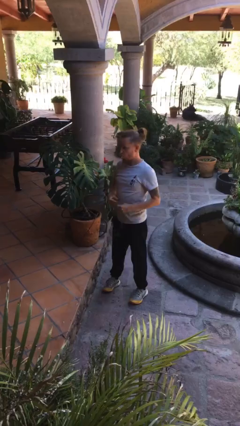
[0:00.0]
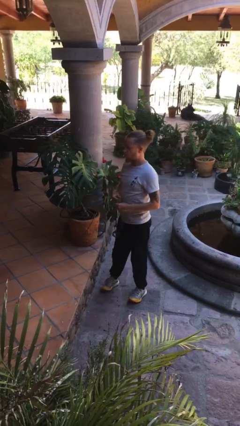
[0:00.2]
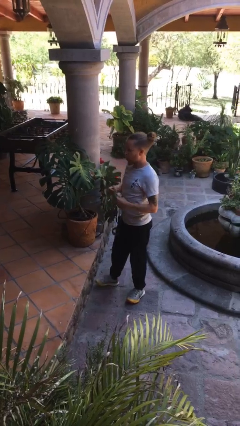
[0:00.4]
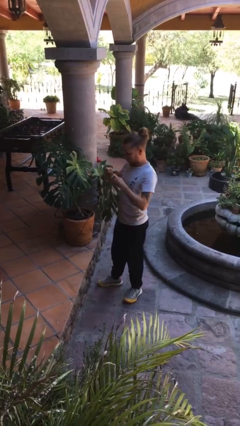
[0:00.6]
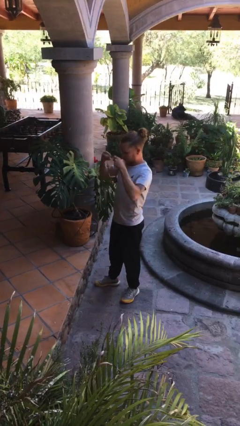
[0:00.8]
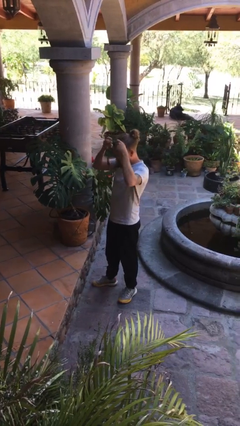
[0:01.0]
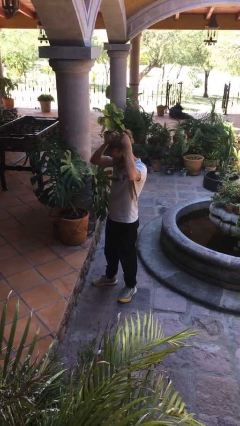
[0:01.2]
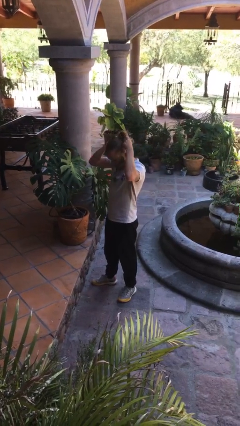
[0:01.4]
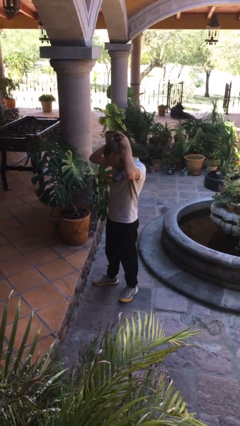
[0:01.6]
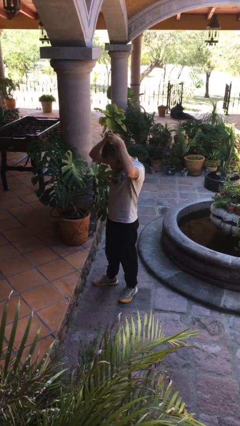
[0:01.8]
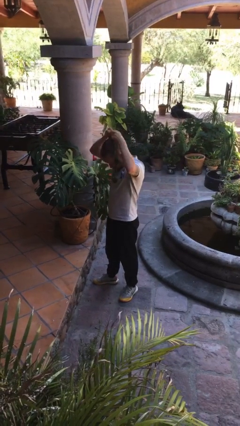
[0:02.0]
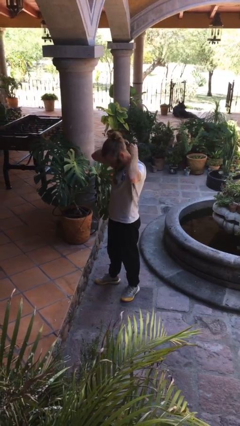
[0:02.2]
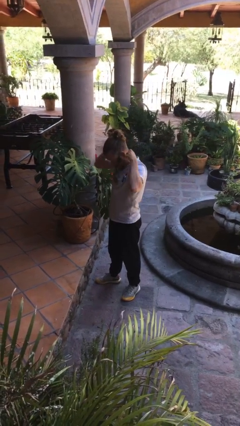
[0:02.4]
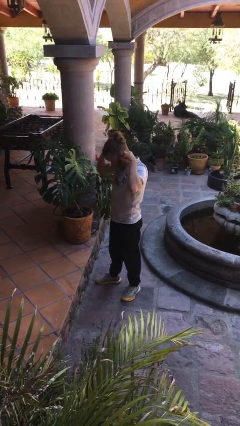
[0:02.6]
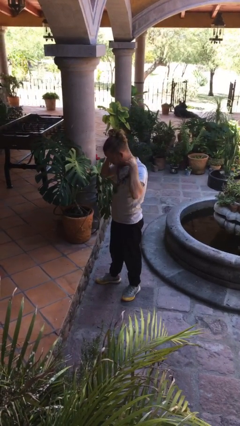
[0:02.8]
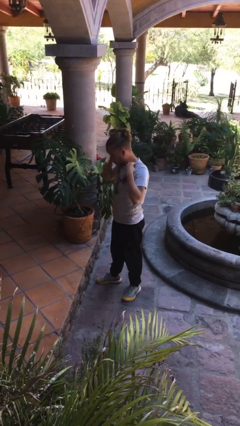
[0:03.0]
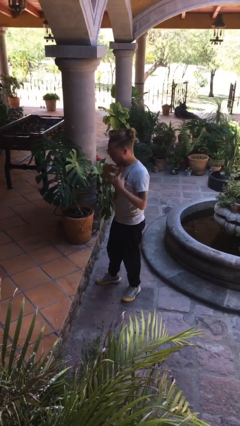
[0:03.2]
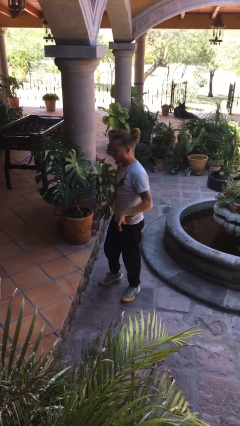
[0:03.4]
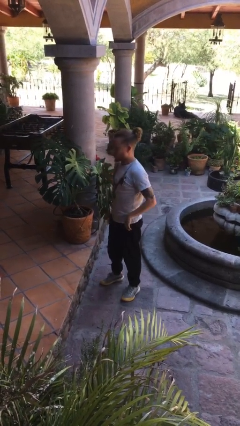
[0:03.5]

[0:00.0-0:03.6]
person puts on necklace

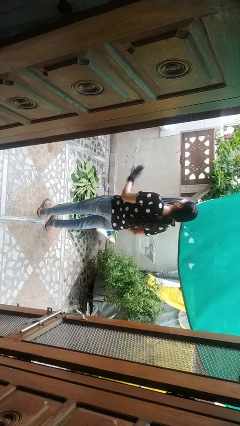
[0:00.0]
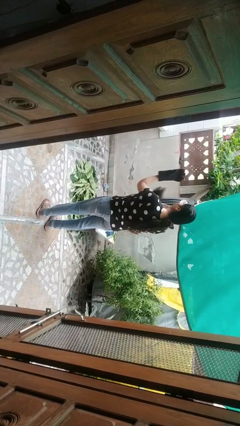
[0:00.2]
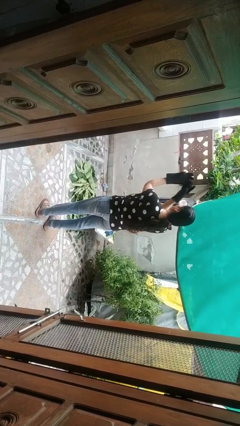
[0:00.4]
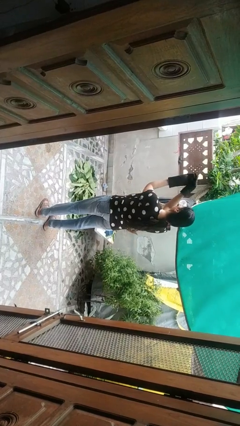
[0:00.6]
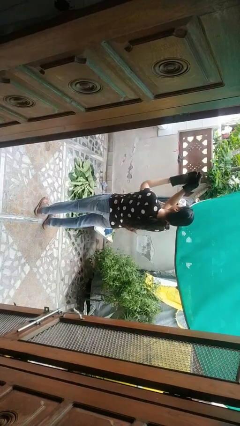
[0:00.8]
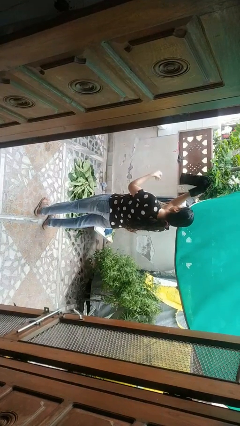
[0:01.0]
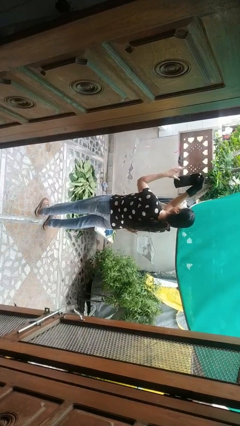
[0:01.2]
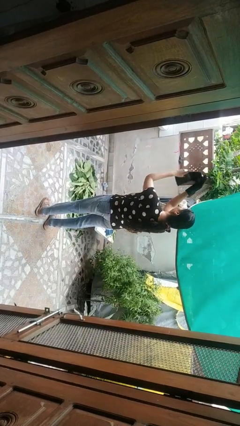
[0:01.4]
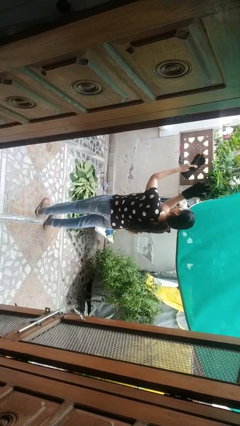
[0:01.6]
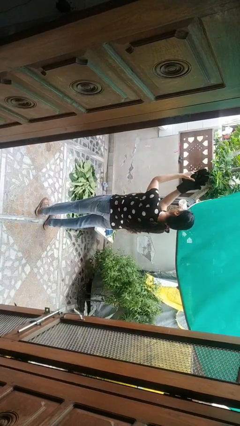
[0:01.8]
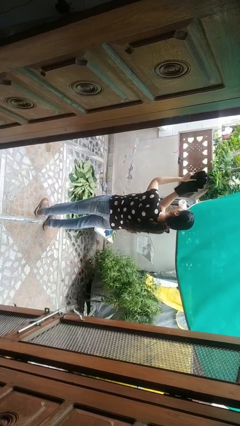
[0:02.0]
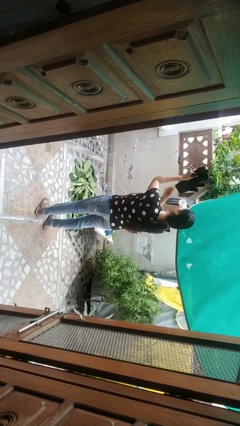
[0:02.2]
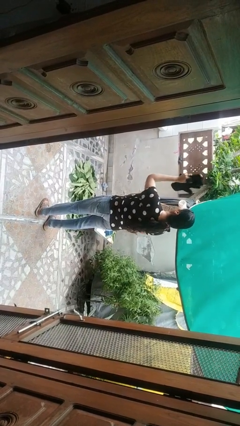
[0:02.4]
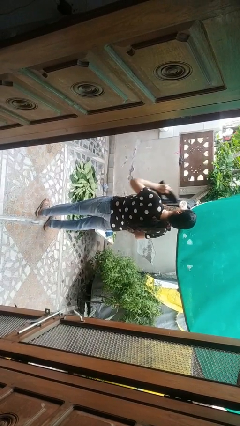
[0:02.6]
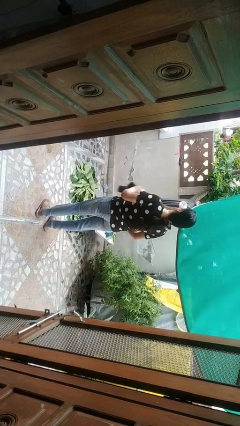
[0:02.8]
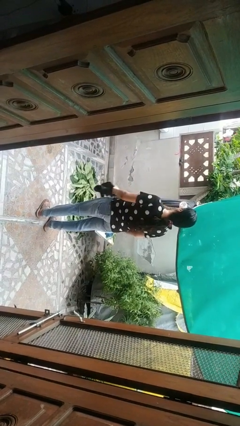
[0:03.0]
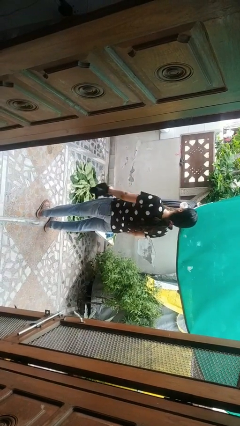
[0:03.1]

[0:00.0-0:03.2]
person takes off gloves

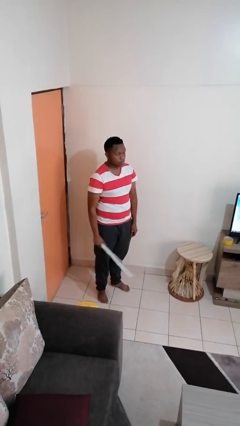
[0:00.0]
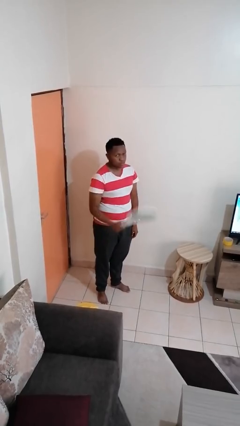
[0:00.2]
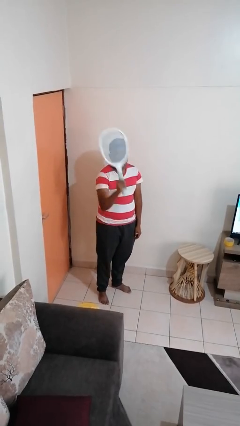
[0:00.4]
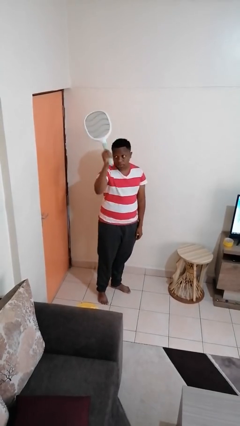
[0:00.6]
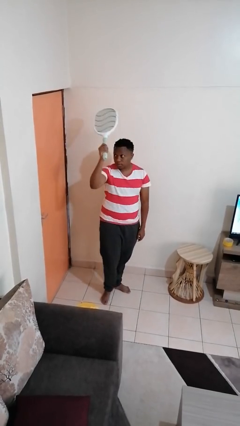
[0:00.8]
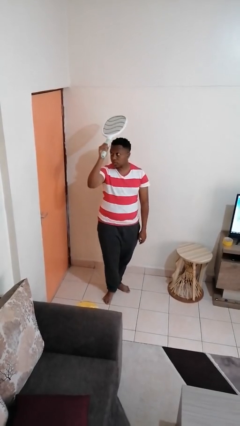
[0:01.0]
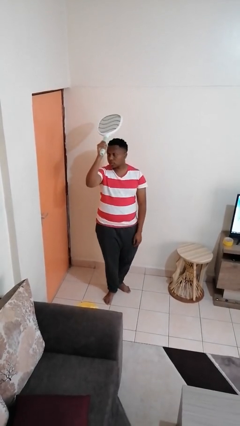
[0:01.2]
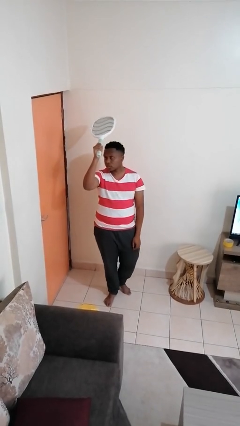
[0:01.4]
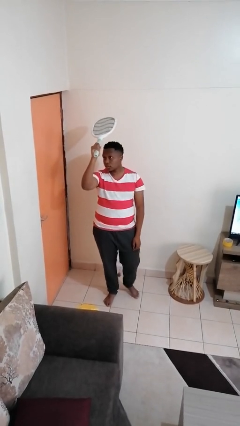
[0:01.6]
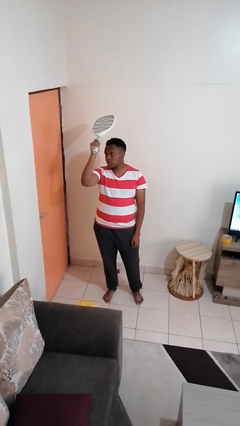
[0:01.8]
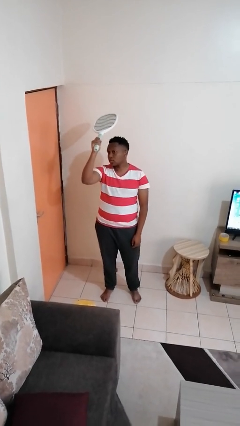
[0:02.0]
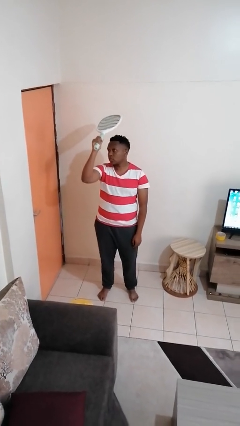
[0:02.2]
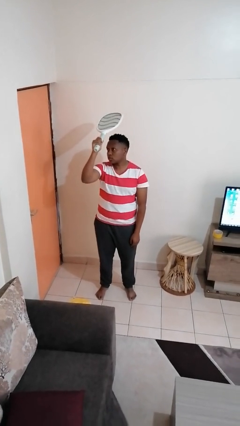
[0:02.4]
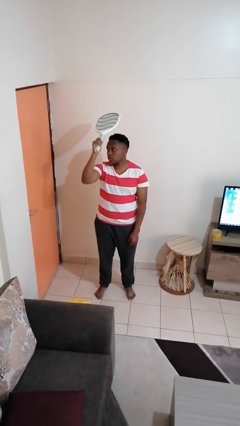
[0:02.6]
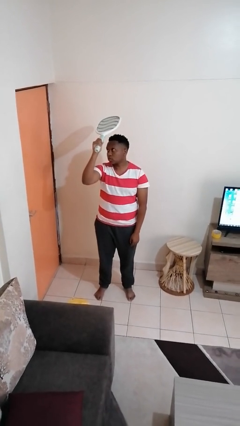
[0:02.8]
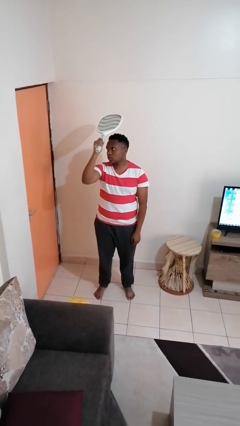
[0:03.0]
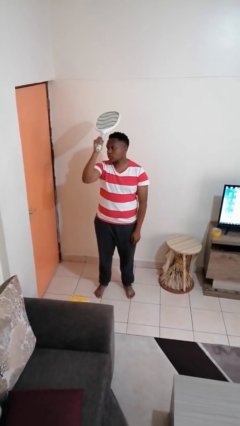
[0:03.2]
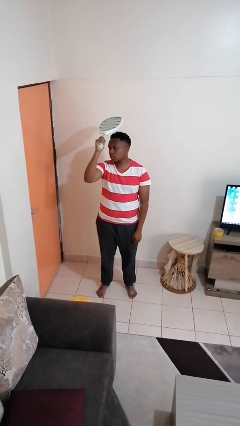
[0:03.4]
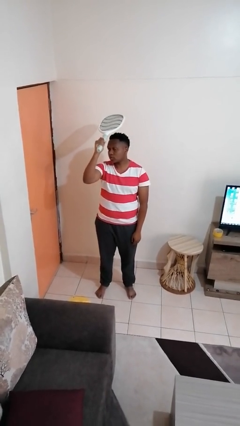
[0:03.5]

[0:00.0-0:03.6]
person holds object above head

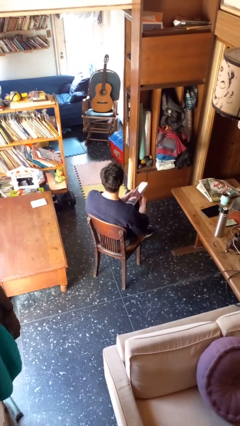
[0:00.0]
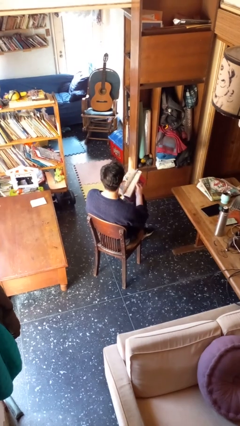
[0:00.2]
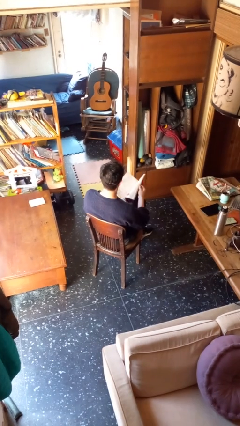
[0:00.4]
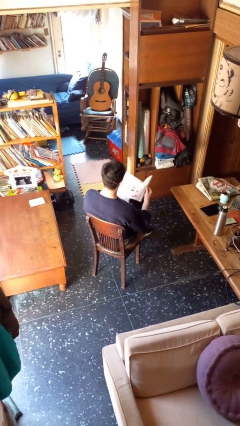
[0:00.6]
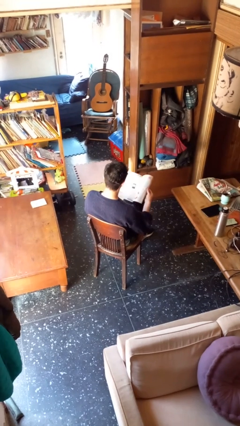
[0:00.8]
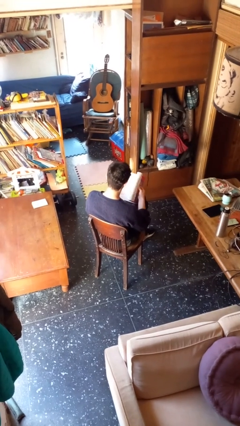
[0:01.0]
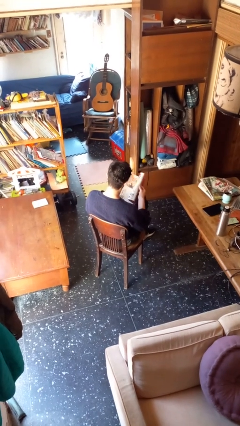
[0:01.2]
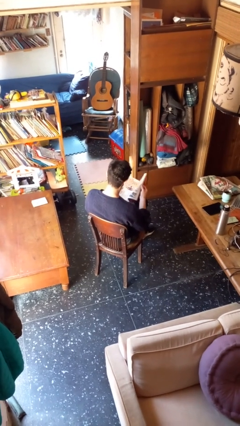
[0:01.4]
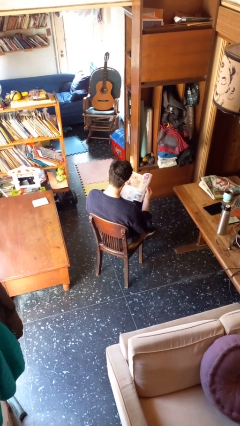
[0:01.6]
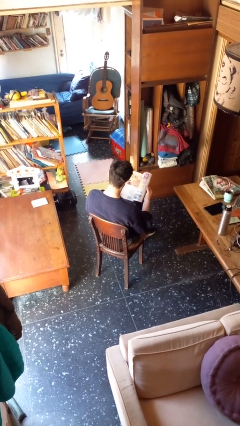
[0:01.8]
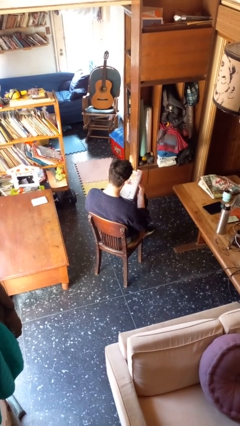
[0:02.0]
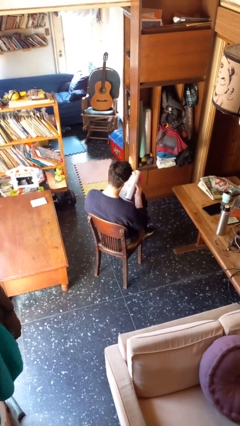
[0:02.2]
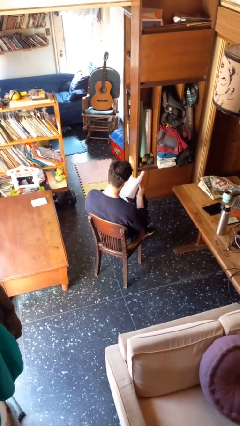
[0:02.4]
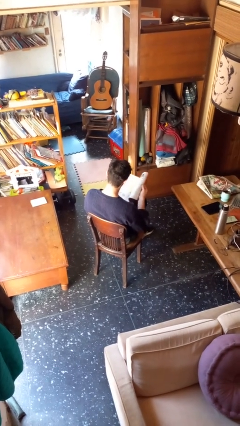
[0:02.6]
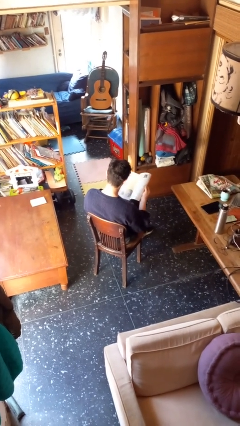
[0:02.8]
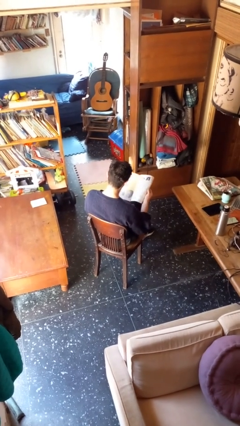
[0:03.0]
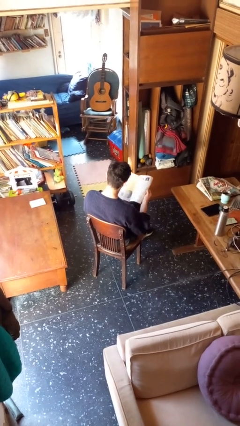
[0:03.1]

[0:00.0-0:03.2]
person reads magazine

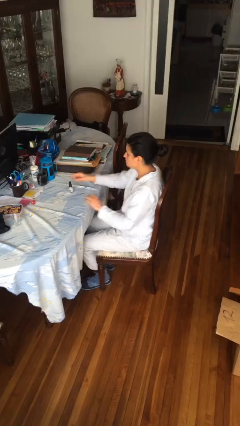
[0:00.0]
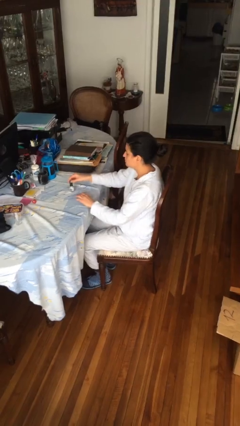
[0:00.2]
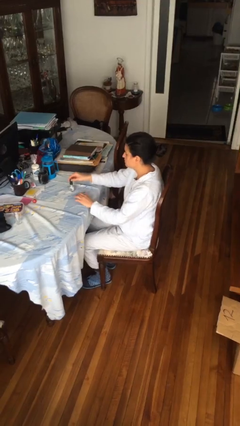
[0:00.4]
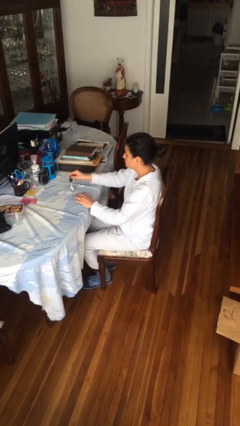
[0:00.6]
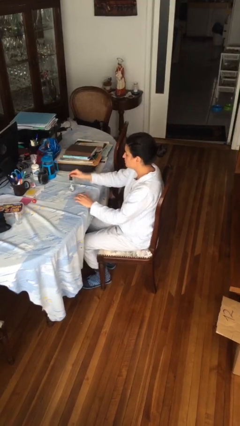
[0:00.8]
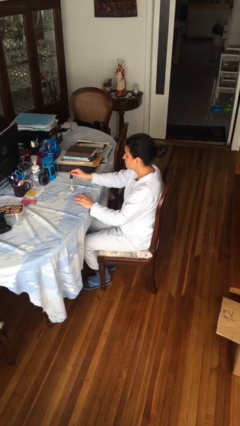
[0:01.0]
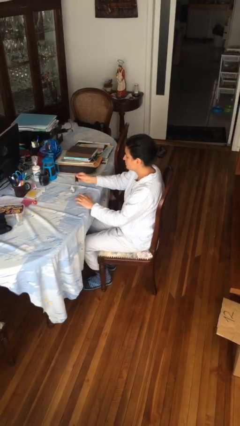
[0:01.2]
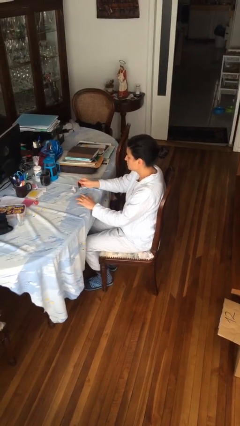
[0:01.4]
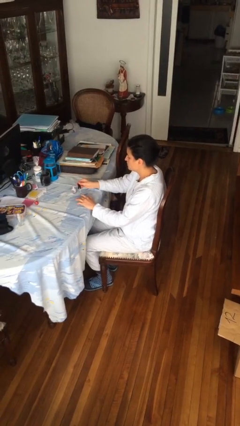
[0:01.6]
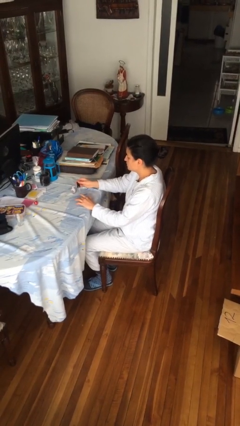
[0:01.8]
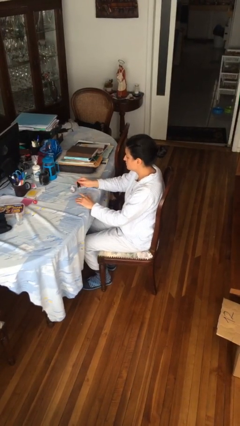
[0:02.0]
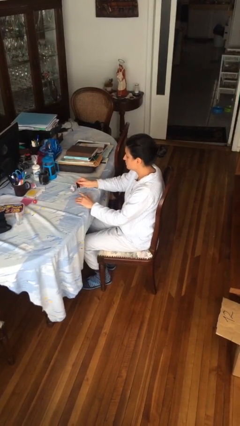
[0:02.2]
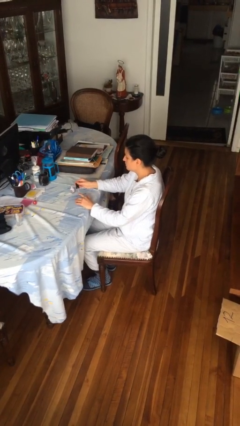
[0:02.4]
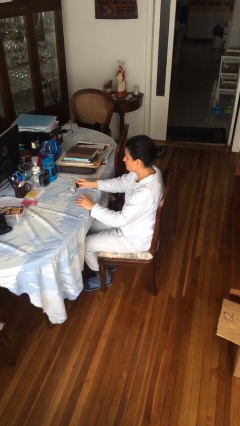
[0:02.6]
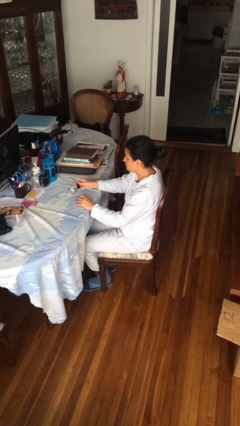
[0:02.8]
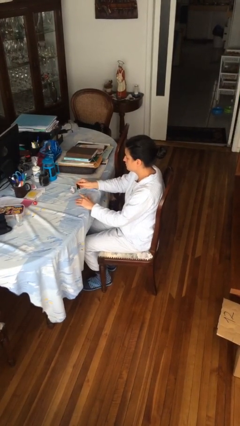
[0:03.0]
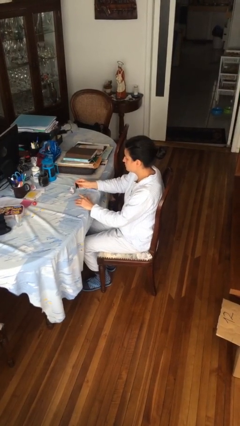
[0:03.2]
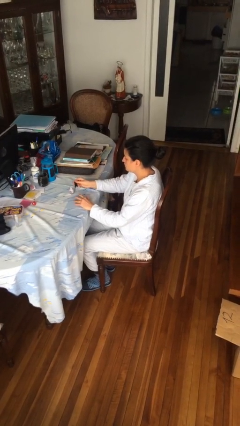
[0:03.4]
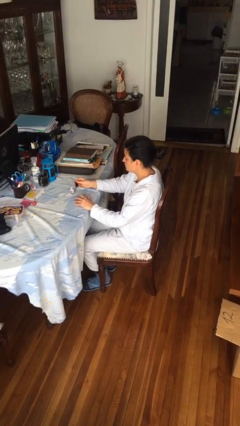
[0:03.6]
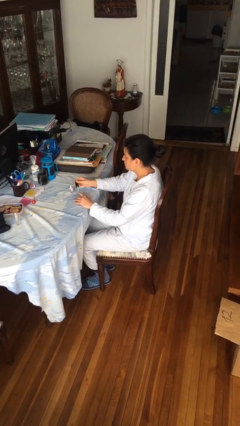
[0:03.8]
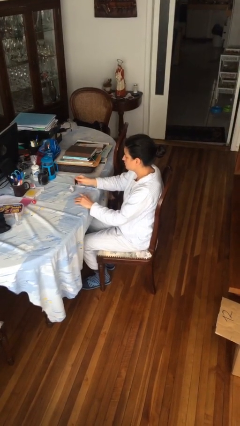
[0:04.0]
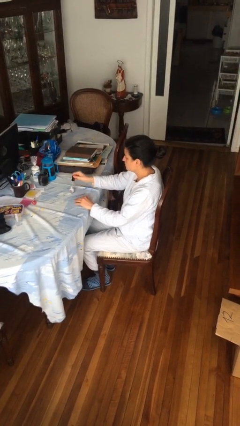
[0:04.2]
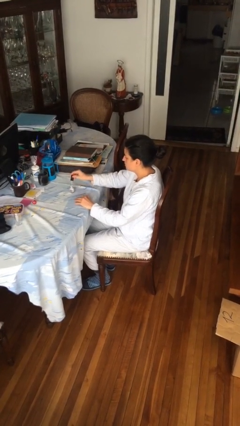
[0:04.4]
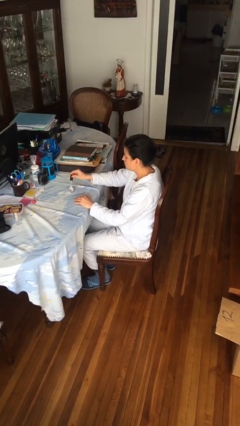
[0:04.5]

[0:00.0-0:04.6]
person paints fingernails
